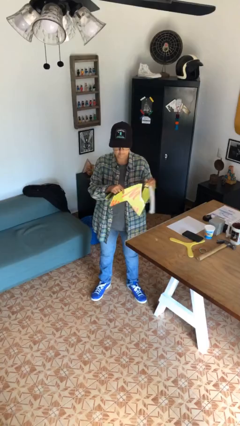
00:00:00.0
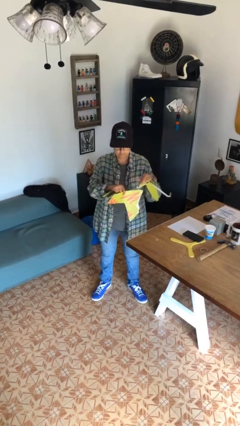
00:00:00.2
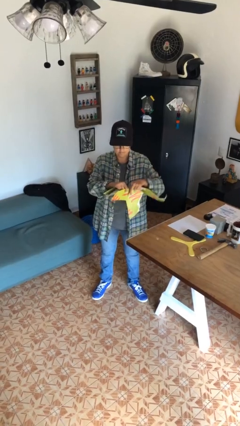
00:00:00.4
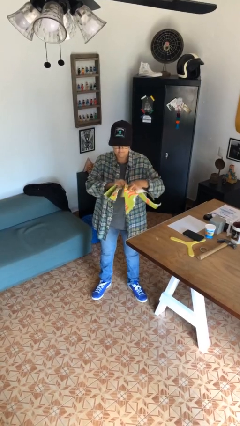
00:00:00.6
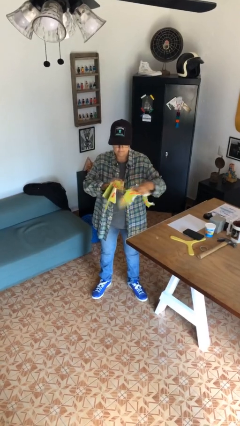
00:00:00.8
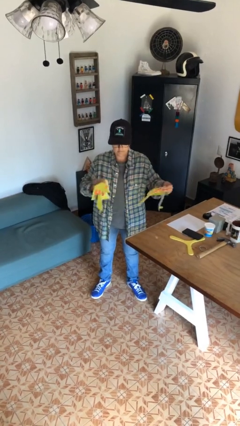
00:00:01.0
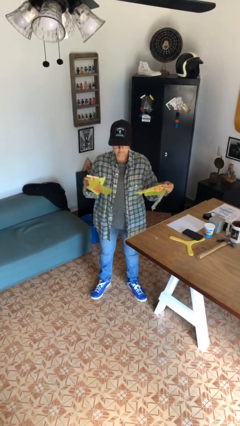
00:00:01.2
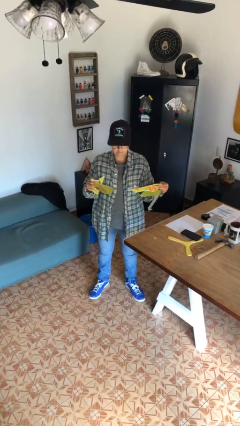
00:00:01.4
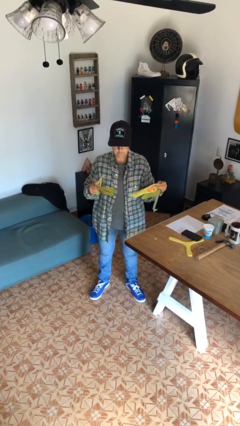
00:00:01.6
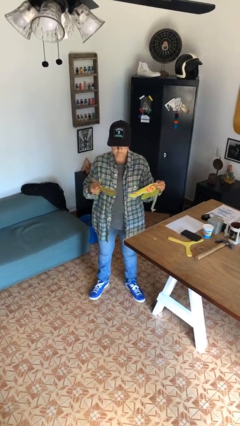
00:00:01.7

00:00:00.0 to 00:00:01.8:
person tears paper

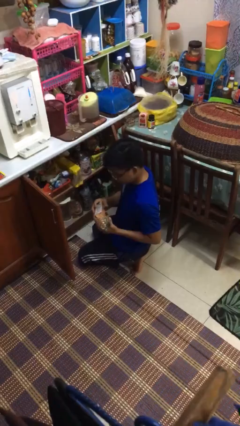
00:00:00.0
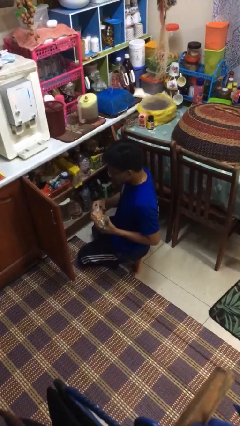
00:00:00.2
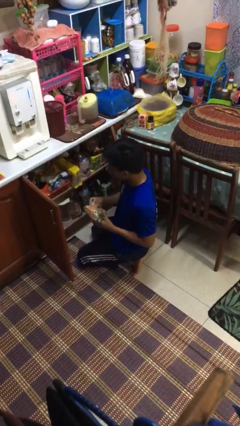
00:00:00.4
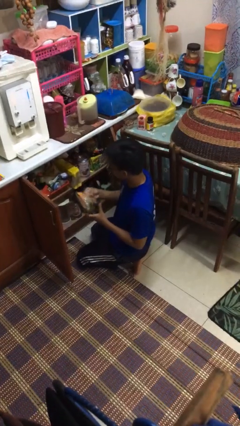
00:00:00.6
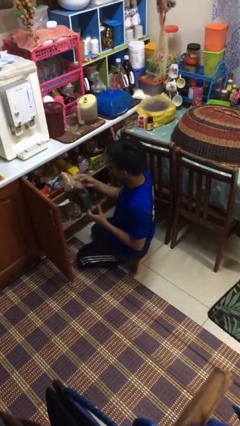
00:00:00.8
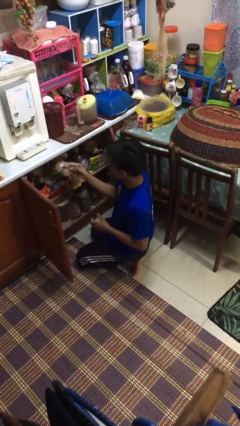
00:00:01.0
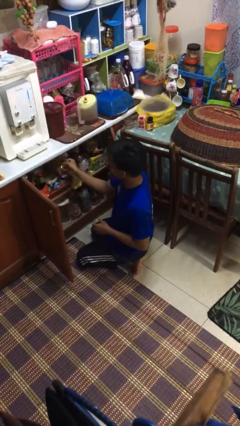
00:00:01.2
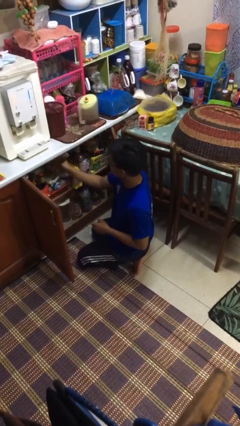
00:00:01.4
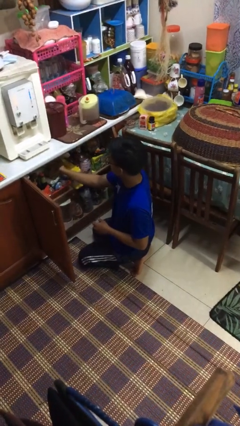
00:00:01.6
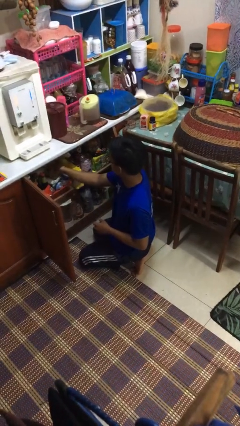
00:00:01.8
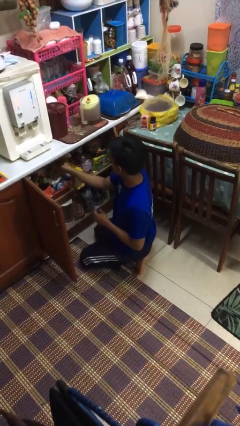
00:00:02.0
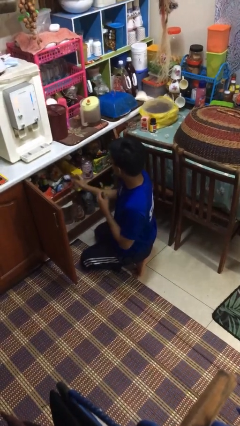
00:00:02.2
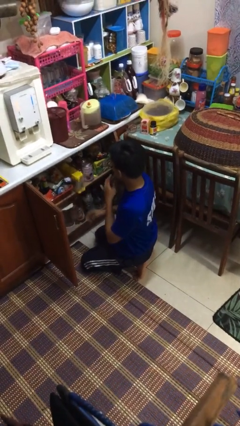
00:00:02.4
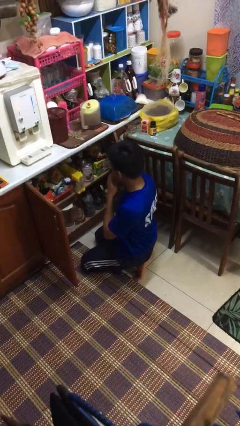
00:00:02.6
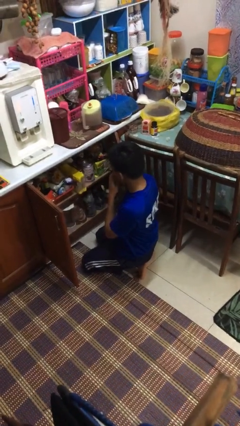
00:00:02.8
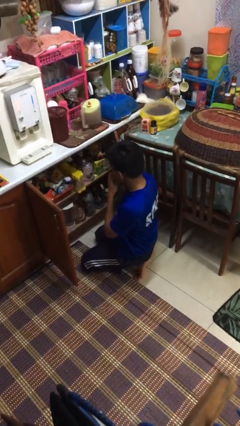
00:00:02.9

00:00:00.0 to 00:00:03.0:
person puts object in cabinet

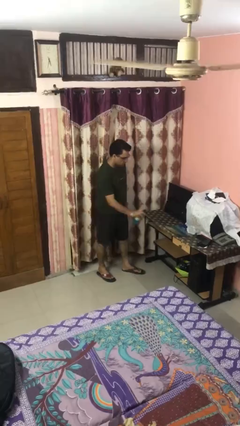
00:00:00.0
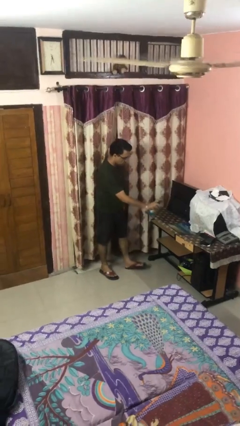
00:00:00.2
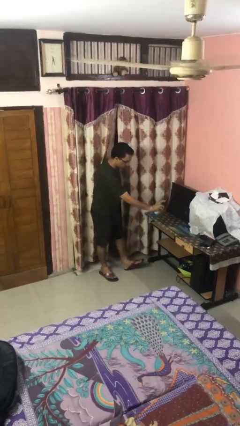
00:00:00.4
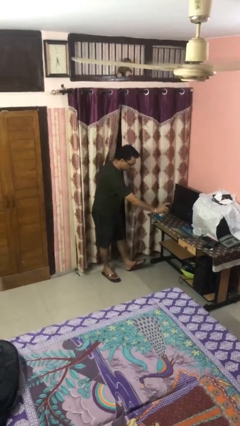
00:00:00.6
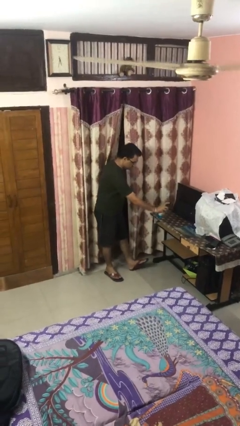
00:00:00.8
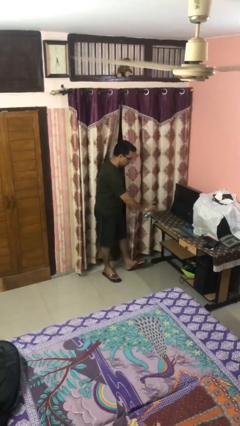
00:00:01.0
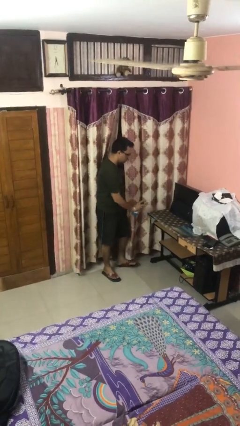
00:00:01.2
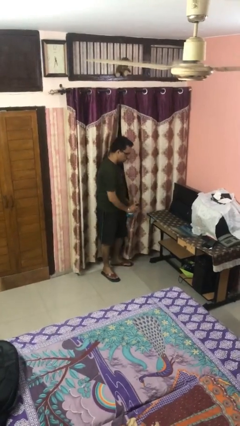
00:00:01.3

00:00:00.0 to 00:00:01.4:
person sprays from bottle

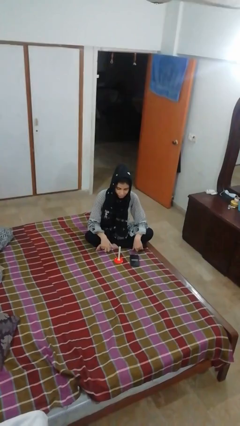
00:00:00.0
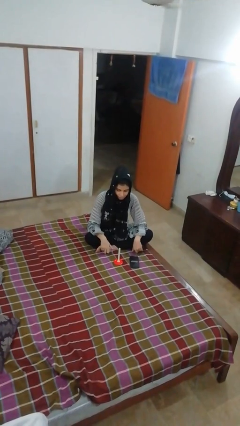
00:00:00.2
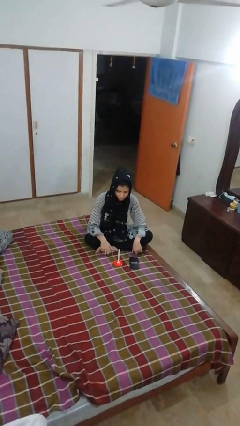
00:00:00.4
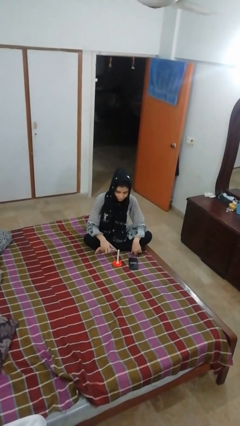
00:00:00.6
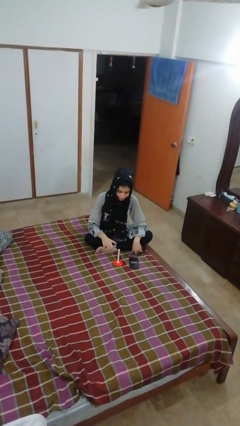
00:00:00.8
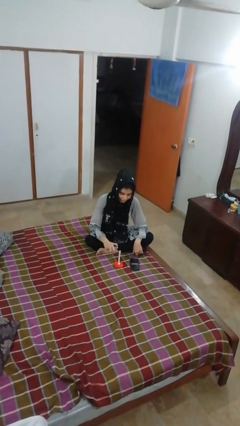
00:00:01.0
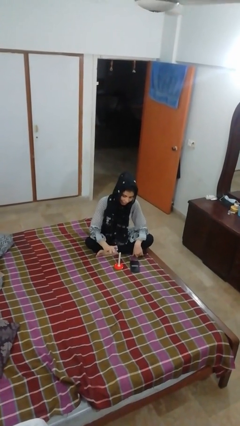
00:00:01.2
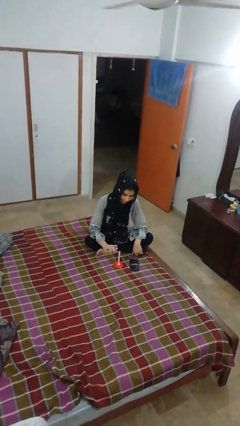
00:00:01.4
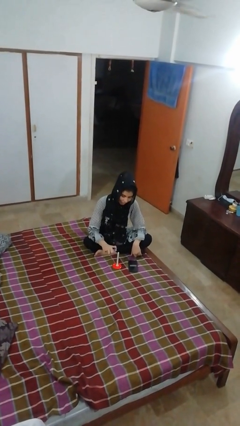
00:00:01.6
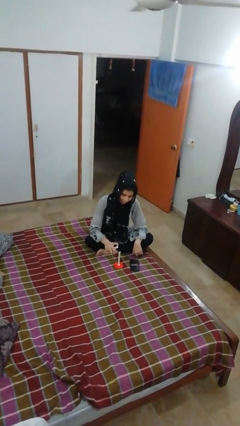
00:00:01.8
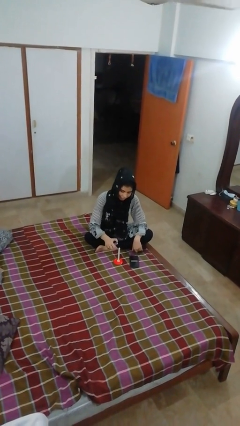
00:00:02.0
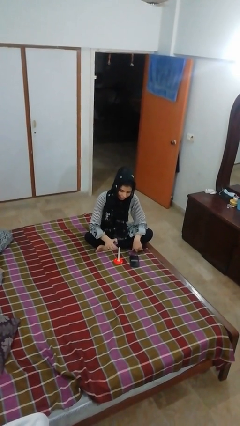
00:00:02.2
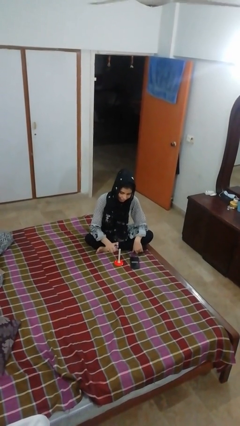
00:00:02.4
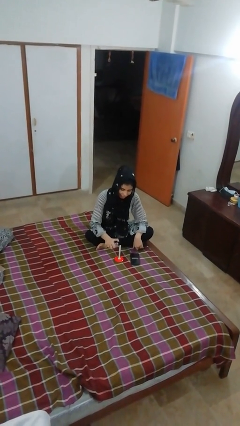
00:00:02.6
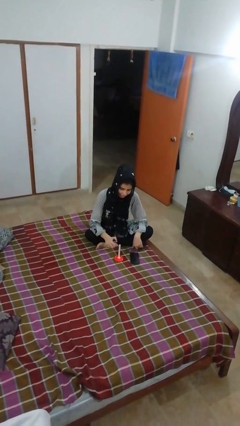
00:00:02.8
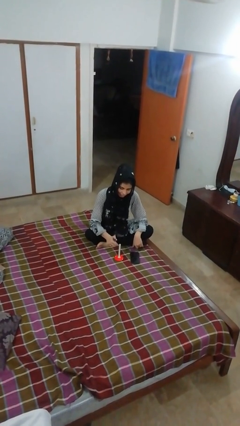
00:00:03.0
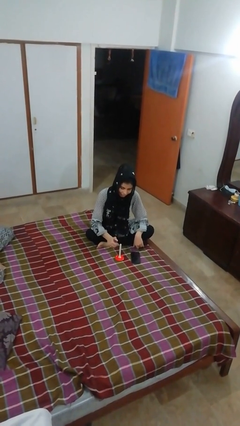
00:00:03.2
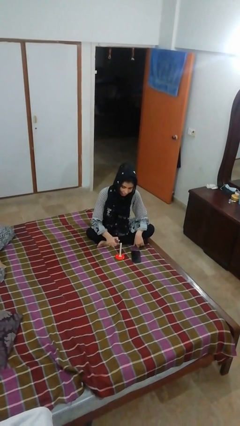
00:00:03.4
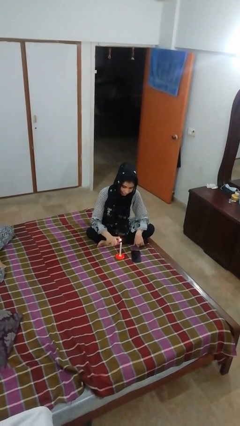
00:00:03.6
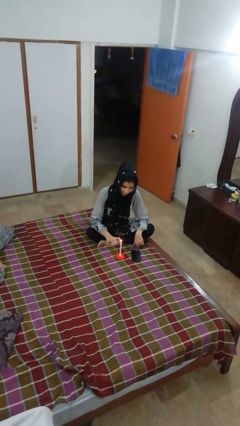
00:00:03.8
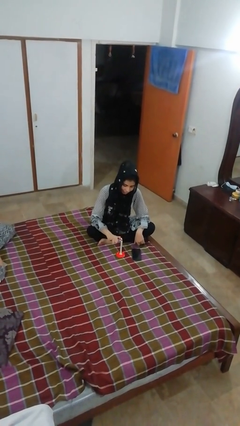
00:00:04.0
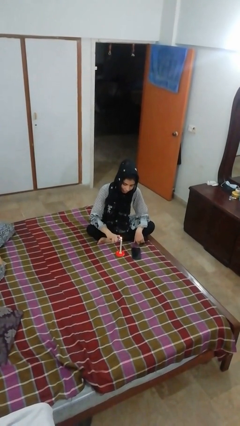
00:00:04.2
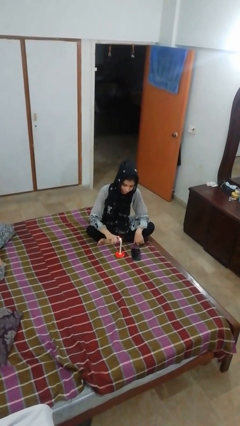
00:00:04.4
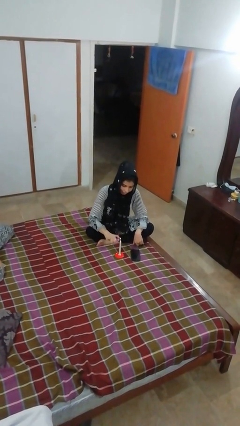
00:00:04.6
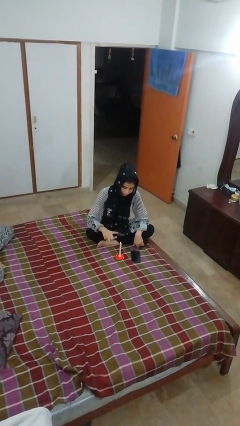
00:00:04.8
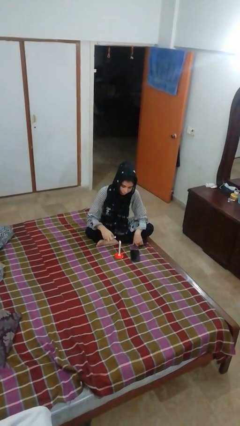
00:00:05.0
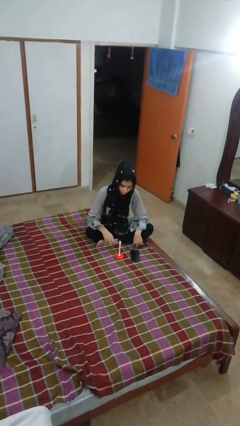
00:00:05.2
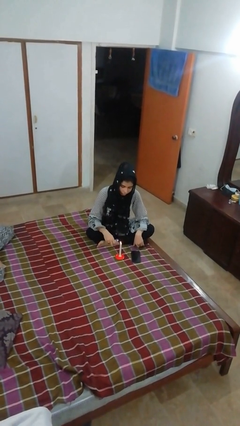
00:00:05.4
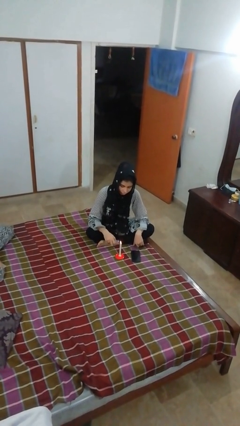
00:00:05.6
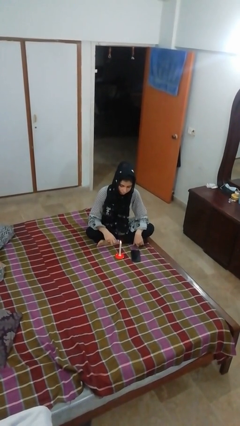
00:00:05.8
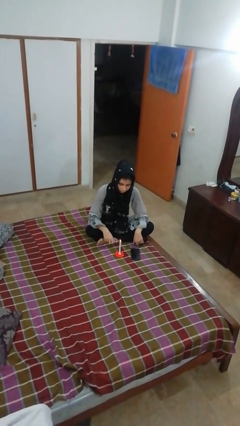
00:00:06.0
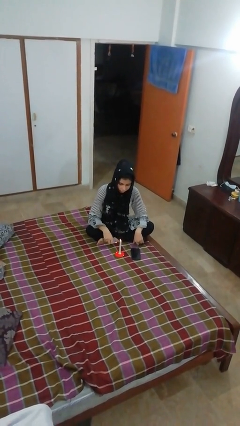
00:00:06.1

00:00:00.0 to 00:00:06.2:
person lights candle

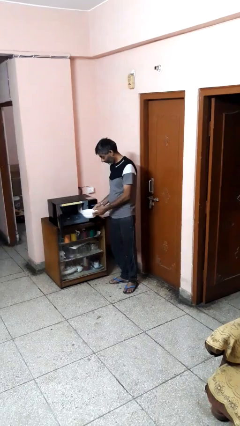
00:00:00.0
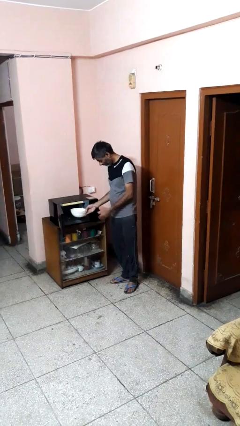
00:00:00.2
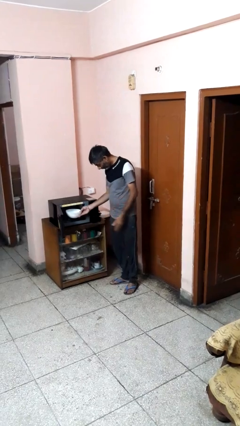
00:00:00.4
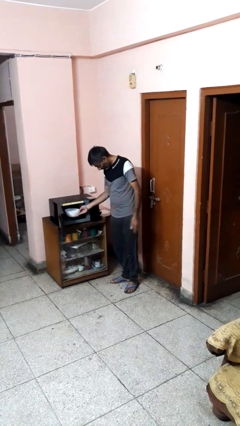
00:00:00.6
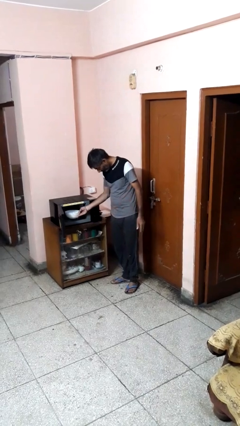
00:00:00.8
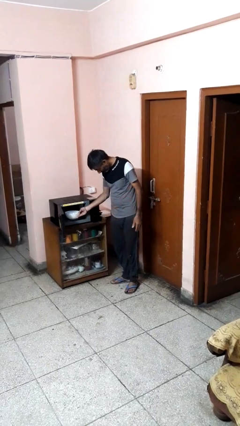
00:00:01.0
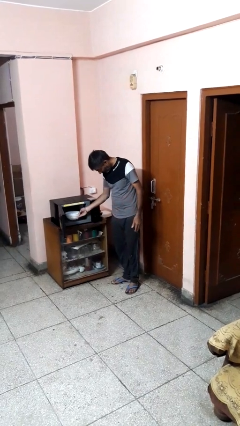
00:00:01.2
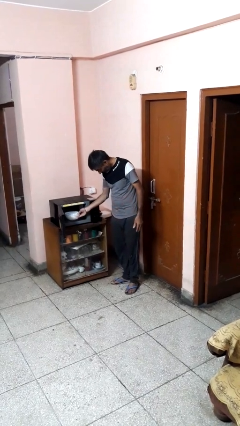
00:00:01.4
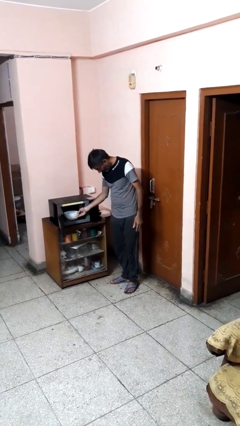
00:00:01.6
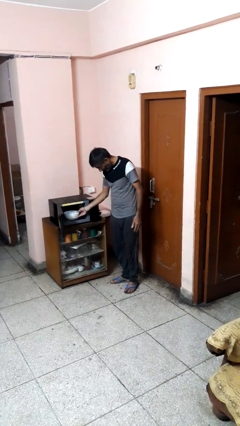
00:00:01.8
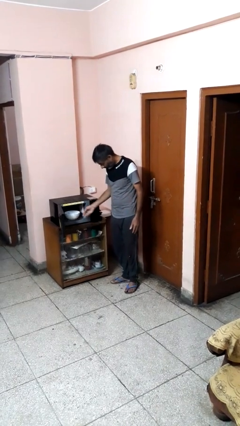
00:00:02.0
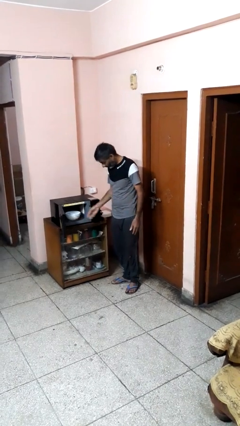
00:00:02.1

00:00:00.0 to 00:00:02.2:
person puts object into microwave

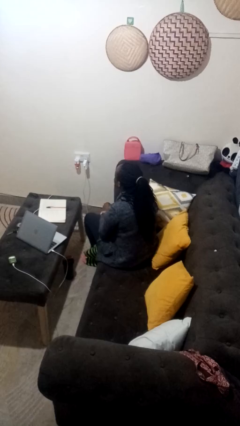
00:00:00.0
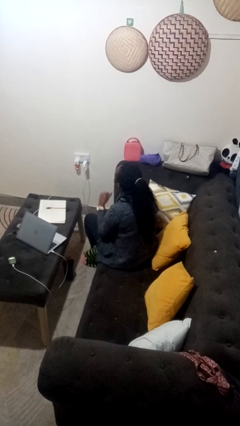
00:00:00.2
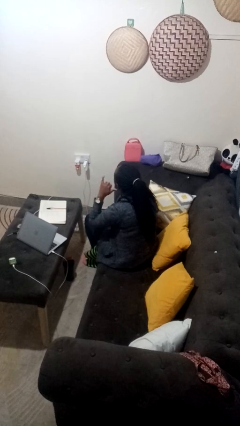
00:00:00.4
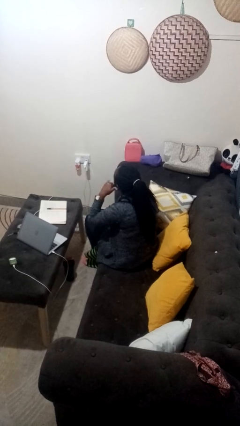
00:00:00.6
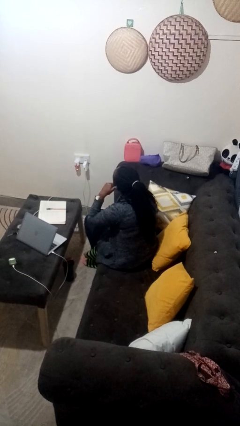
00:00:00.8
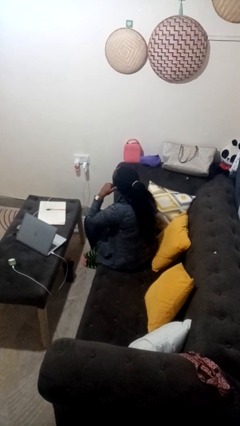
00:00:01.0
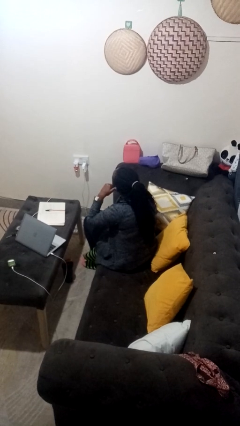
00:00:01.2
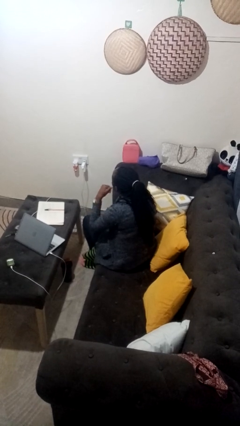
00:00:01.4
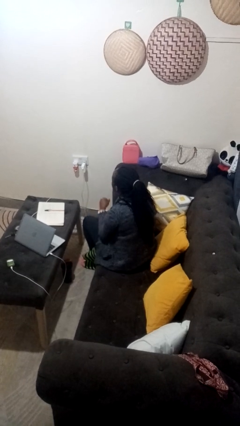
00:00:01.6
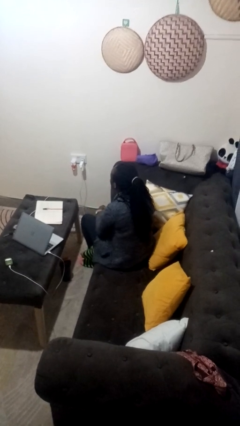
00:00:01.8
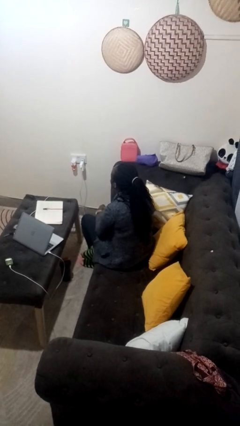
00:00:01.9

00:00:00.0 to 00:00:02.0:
person gestures call me

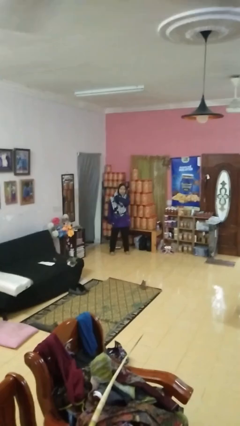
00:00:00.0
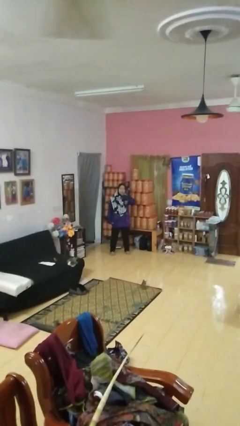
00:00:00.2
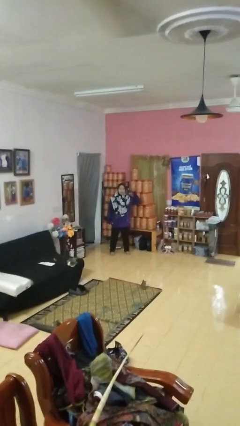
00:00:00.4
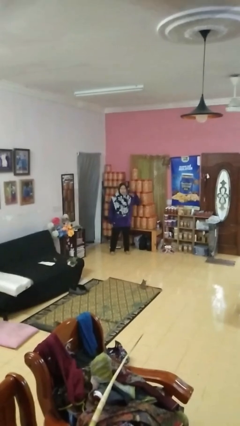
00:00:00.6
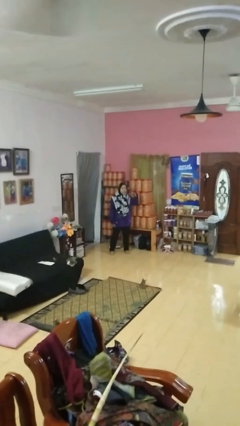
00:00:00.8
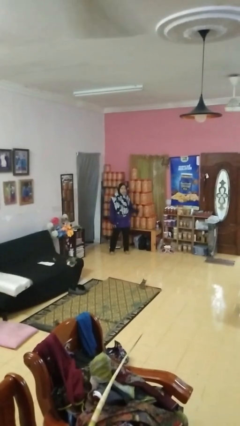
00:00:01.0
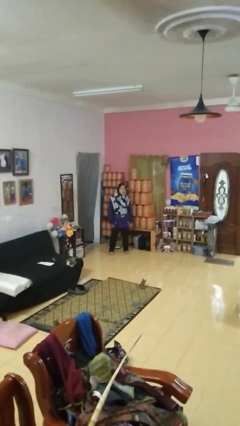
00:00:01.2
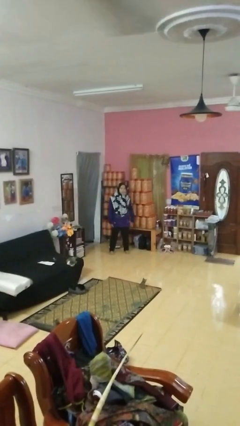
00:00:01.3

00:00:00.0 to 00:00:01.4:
person gestures cut
